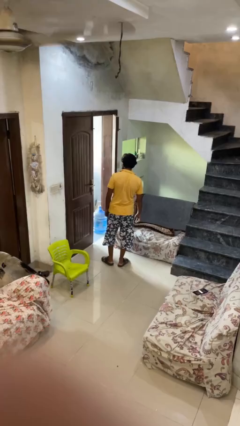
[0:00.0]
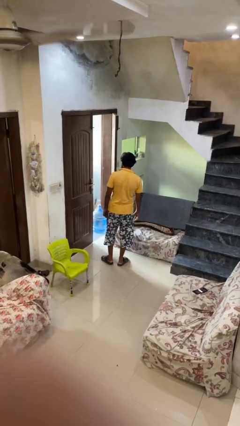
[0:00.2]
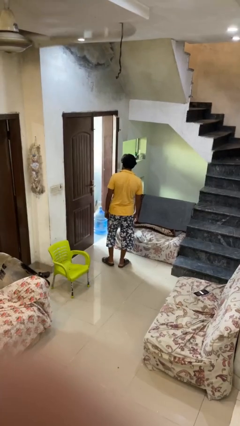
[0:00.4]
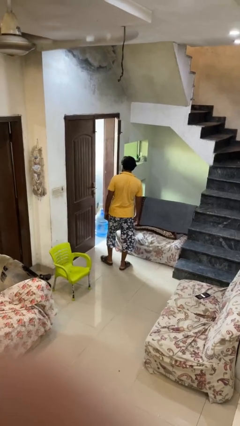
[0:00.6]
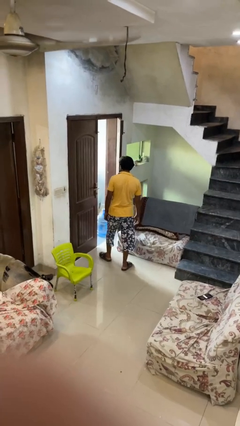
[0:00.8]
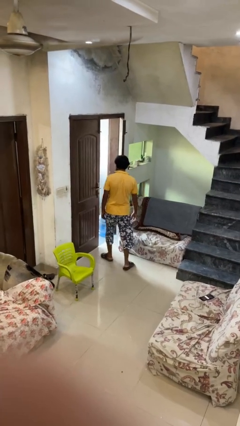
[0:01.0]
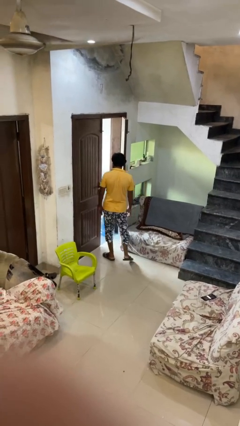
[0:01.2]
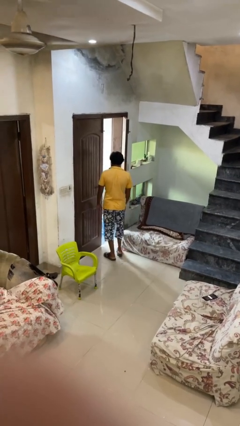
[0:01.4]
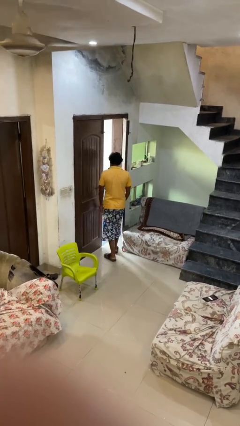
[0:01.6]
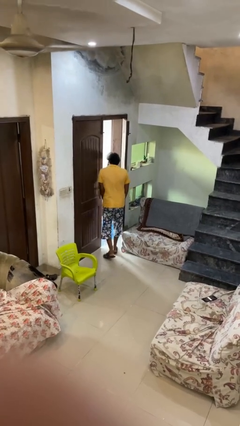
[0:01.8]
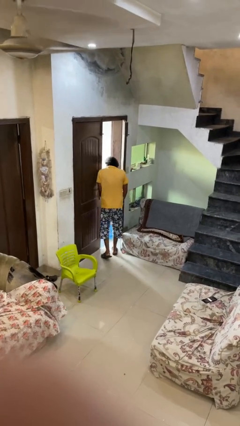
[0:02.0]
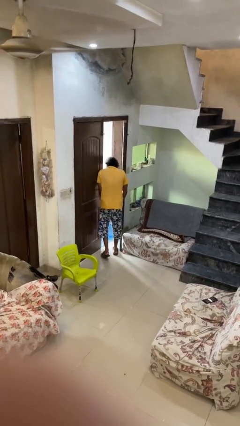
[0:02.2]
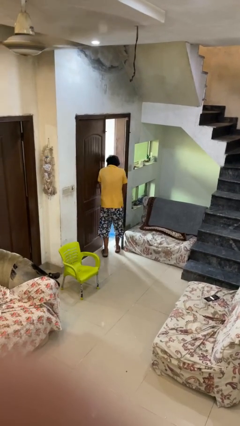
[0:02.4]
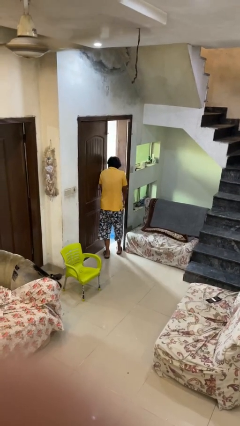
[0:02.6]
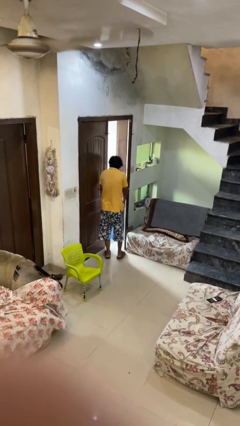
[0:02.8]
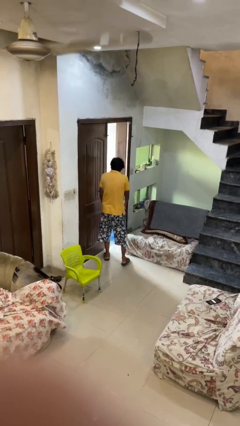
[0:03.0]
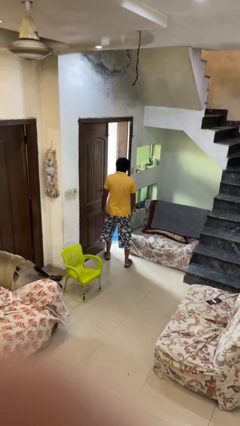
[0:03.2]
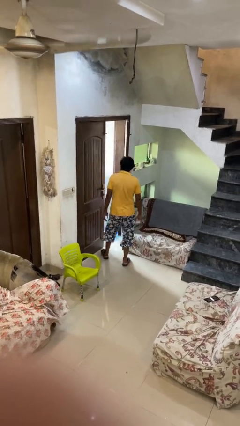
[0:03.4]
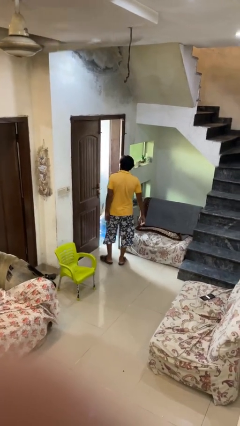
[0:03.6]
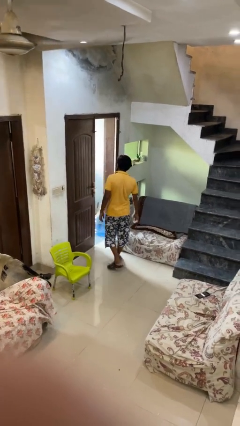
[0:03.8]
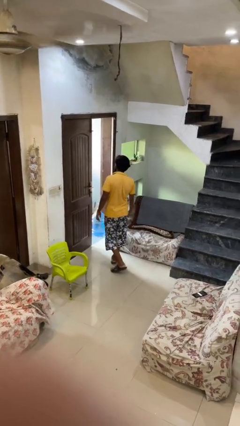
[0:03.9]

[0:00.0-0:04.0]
person bumps into wall

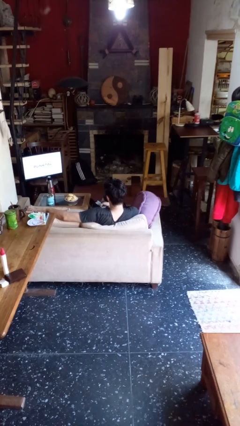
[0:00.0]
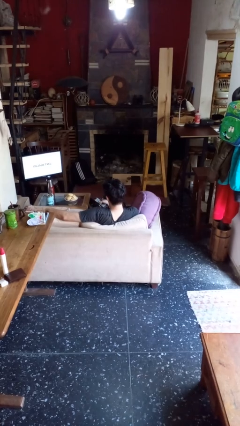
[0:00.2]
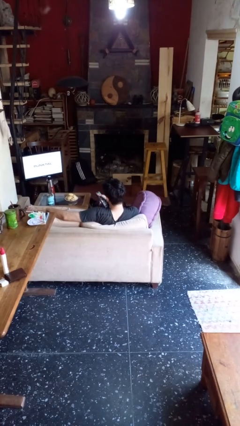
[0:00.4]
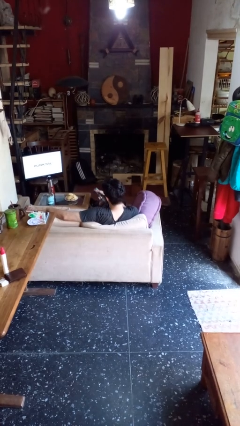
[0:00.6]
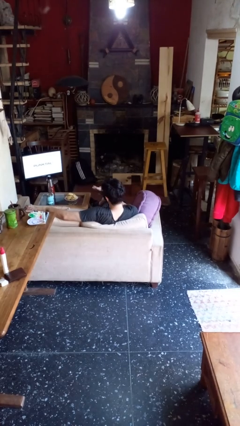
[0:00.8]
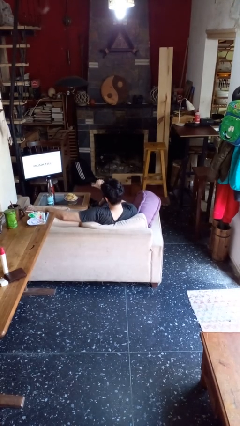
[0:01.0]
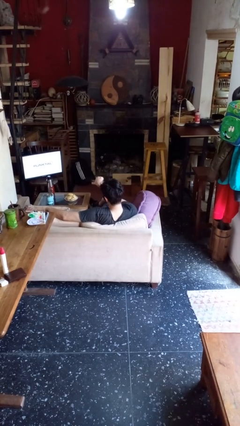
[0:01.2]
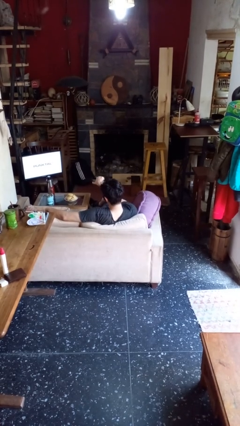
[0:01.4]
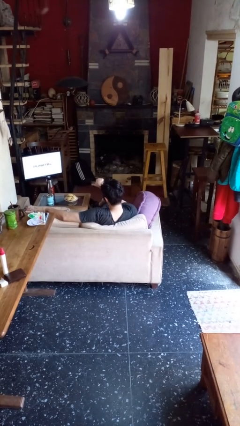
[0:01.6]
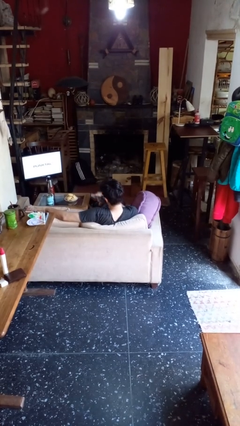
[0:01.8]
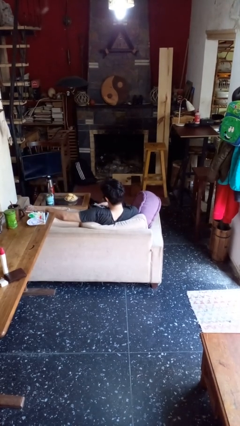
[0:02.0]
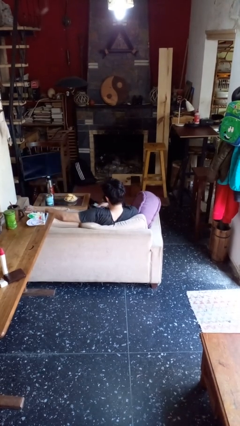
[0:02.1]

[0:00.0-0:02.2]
person uses television remote

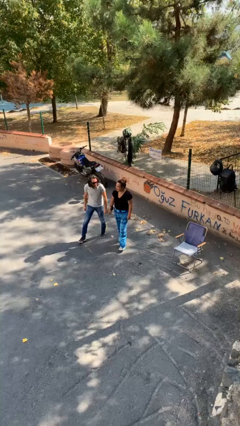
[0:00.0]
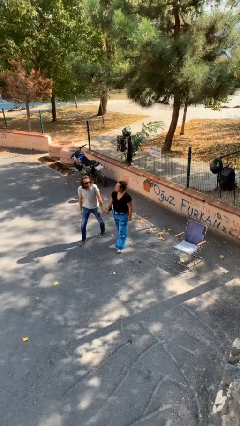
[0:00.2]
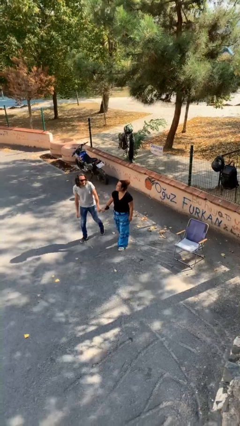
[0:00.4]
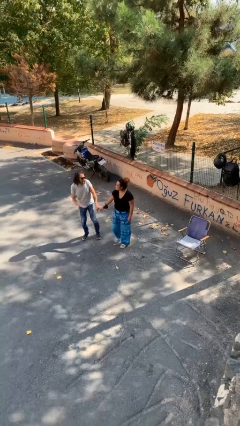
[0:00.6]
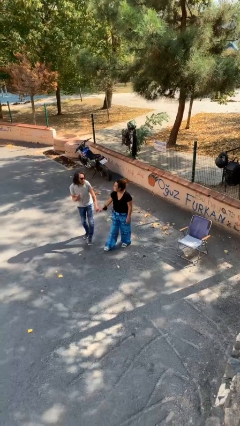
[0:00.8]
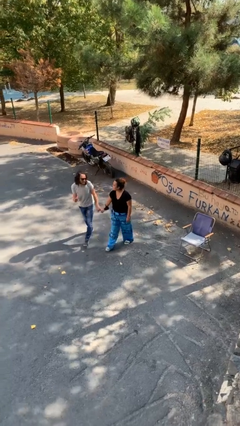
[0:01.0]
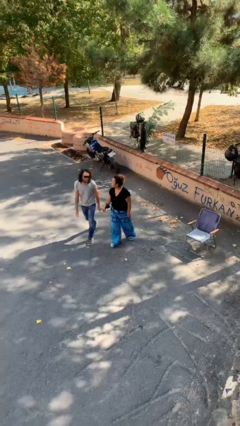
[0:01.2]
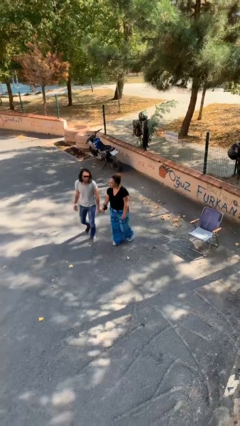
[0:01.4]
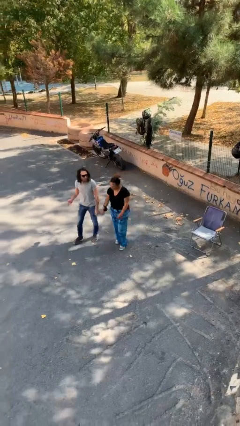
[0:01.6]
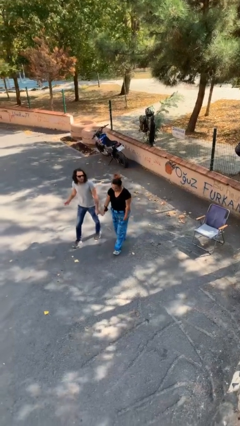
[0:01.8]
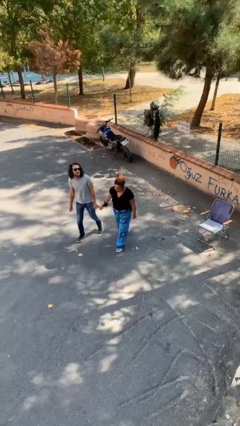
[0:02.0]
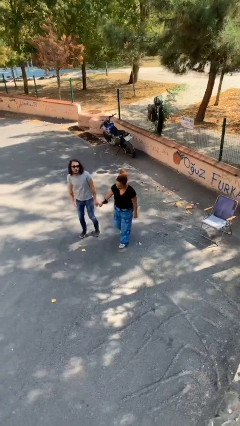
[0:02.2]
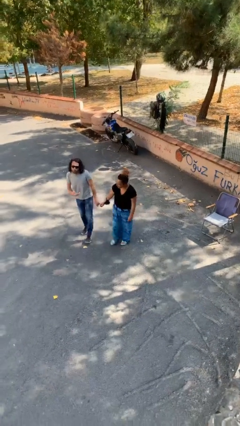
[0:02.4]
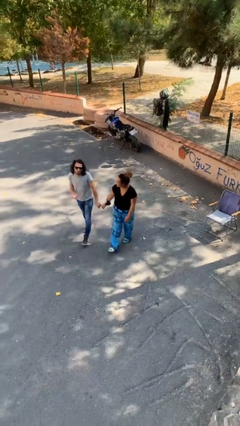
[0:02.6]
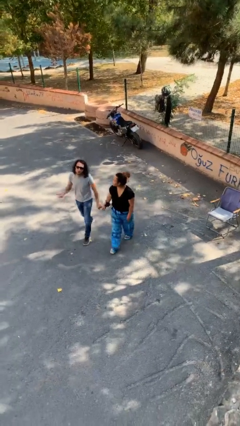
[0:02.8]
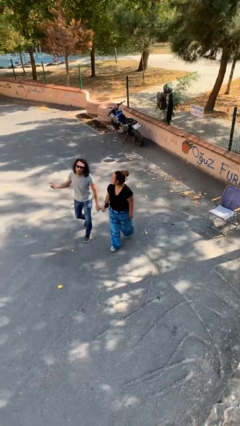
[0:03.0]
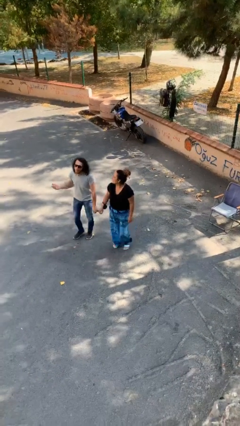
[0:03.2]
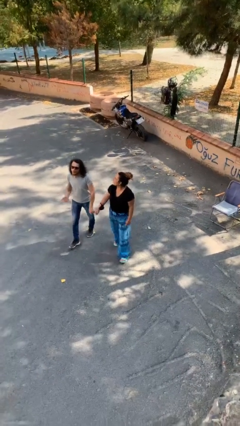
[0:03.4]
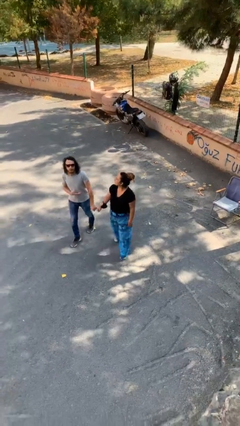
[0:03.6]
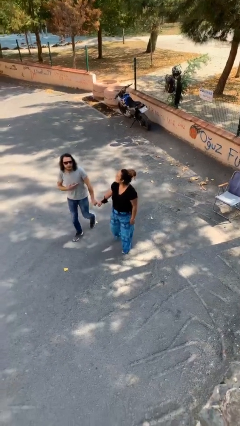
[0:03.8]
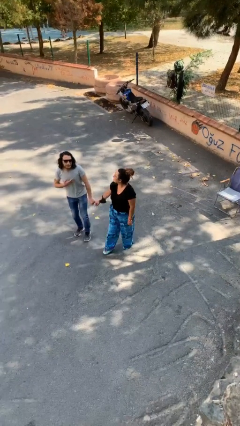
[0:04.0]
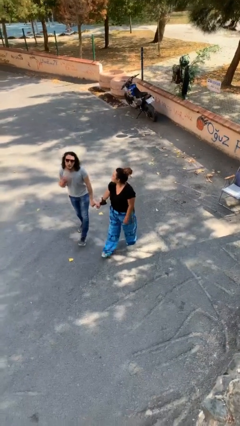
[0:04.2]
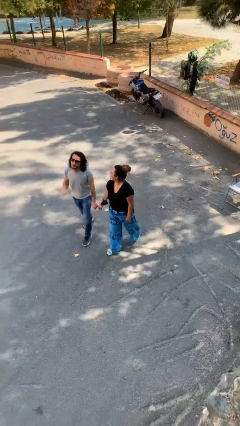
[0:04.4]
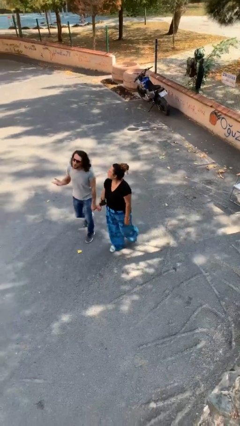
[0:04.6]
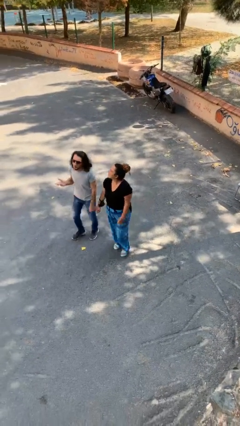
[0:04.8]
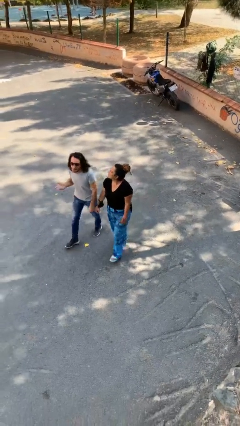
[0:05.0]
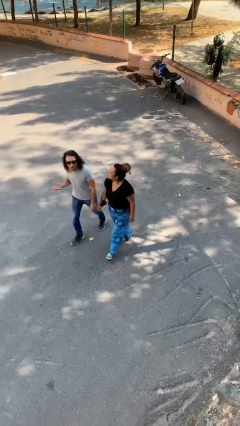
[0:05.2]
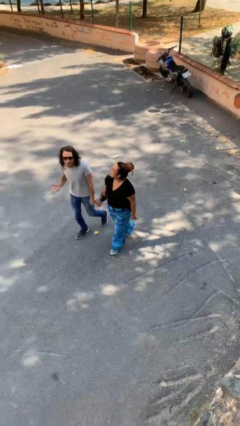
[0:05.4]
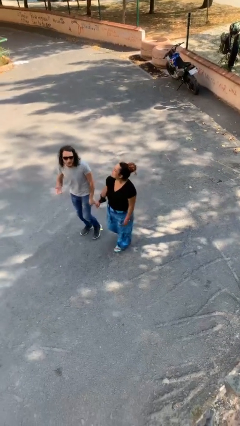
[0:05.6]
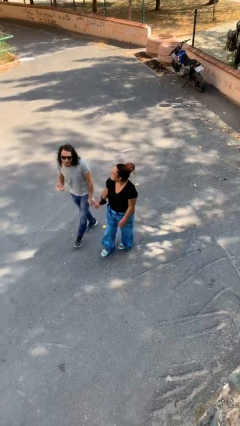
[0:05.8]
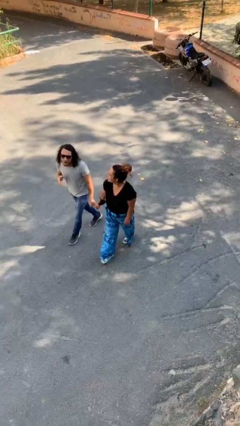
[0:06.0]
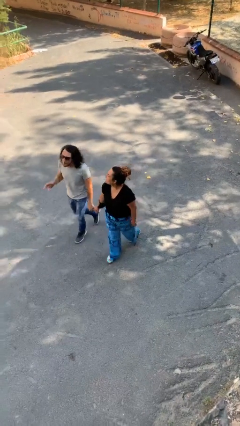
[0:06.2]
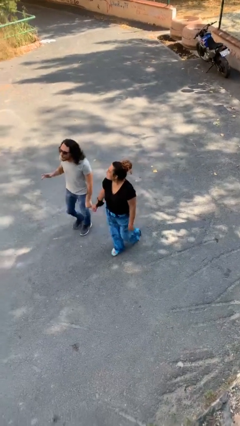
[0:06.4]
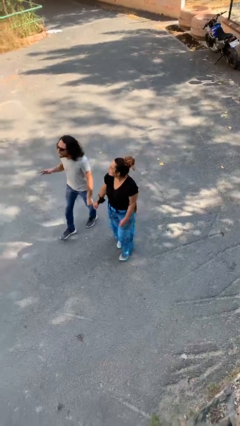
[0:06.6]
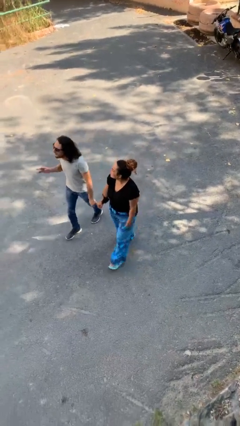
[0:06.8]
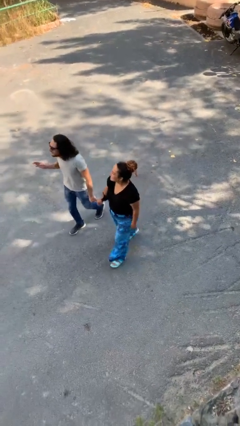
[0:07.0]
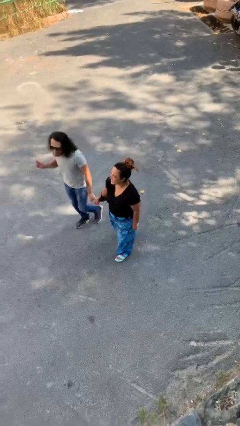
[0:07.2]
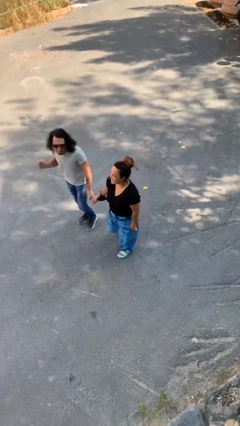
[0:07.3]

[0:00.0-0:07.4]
person holds hand

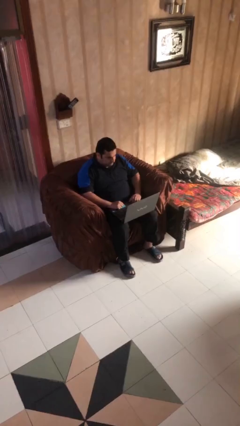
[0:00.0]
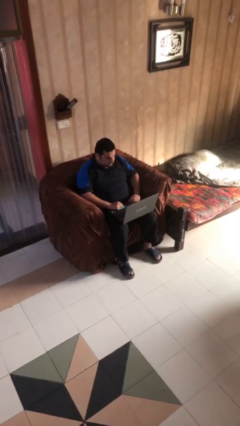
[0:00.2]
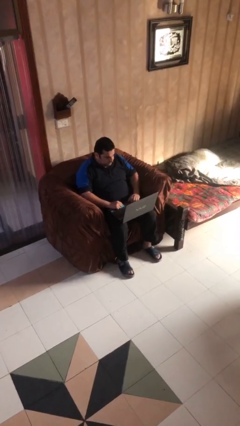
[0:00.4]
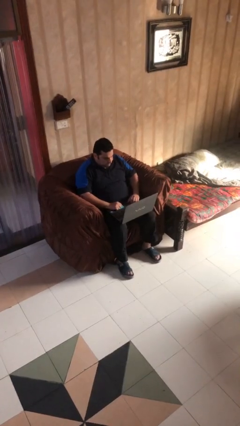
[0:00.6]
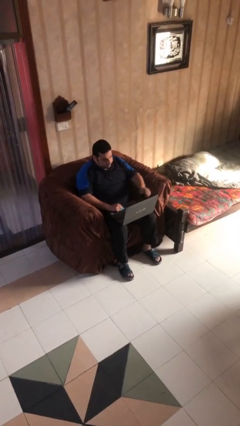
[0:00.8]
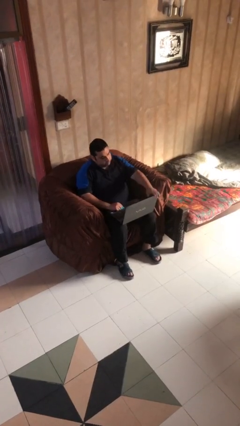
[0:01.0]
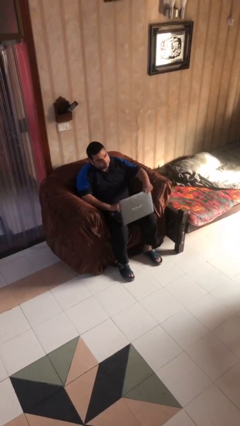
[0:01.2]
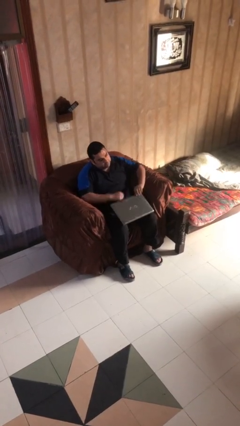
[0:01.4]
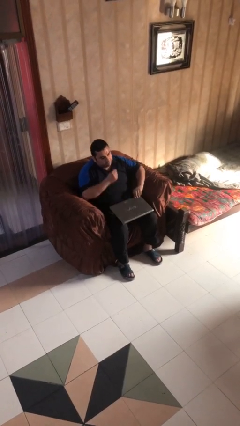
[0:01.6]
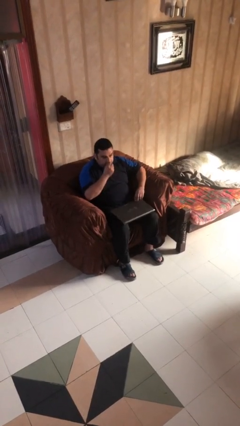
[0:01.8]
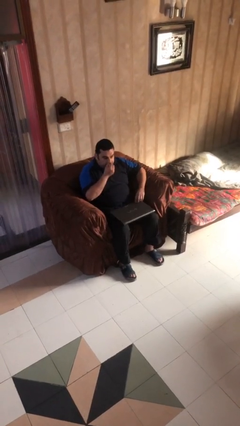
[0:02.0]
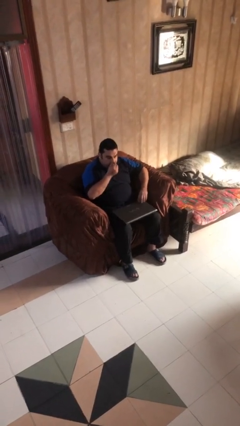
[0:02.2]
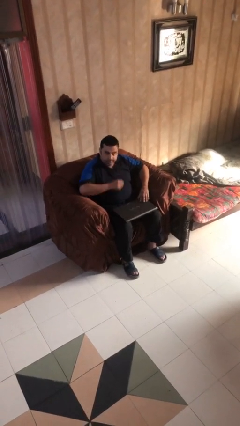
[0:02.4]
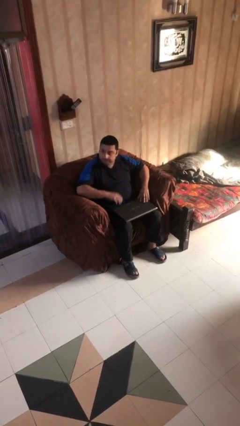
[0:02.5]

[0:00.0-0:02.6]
person closes laptop

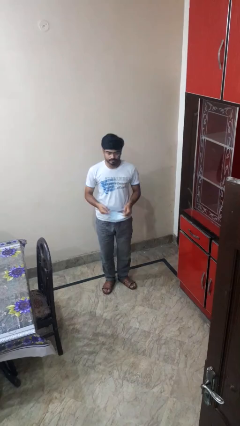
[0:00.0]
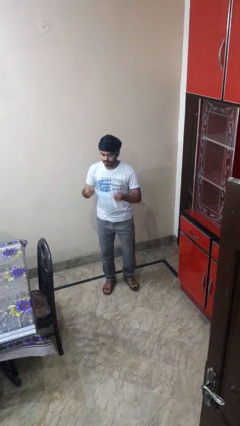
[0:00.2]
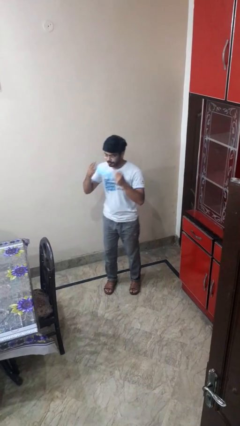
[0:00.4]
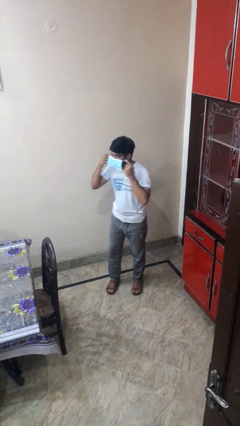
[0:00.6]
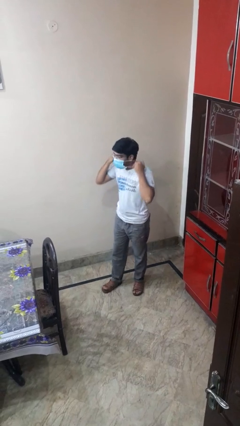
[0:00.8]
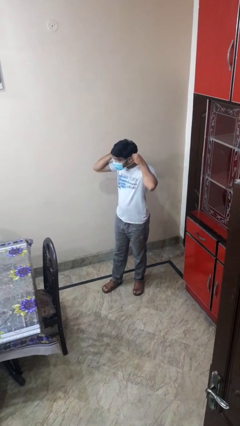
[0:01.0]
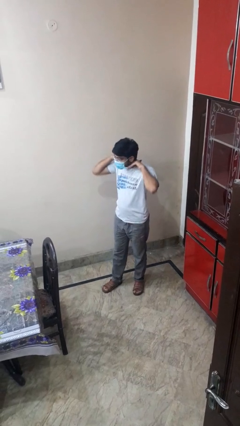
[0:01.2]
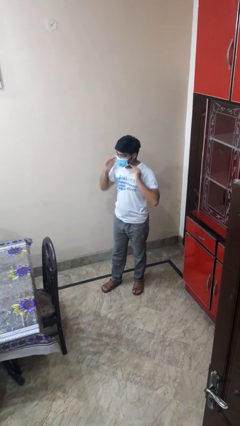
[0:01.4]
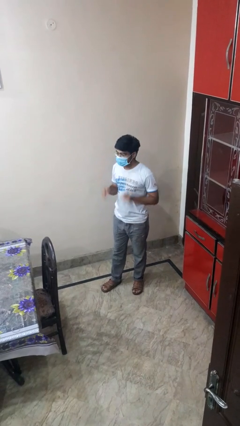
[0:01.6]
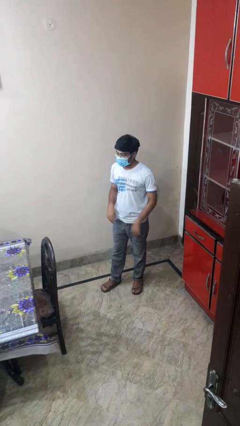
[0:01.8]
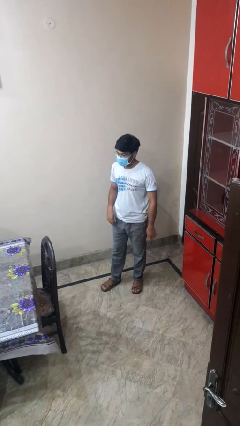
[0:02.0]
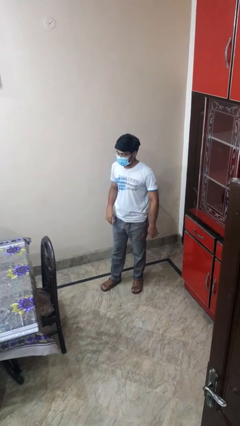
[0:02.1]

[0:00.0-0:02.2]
person puts on facemask
